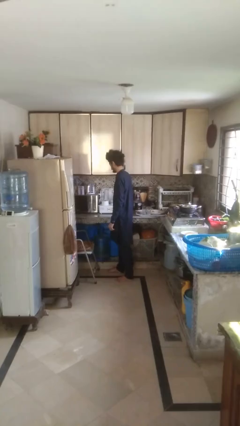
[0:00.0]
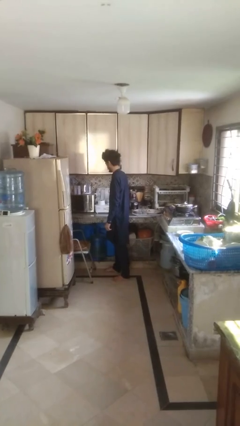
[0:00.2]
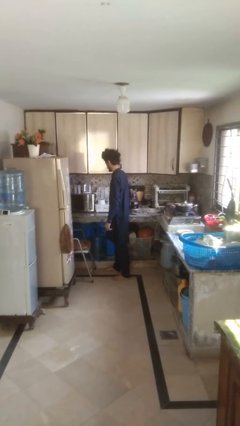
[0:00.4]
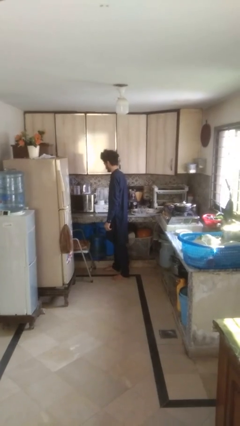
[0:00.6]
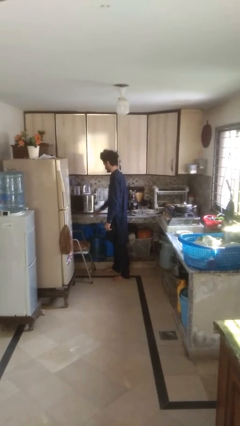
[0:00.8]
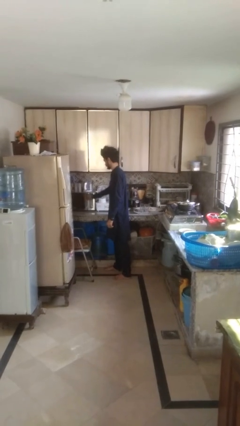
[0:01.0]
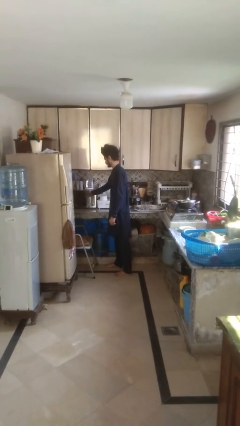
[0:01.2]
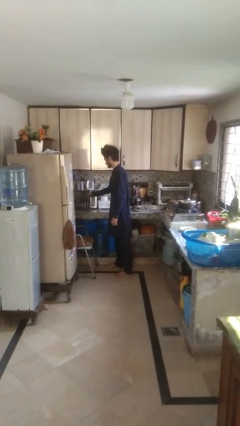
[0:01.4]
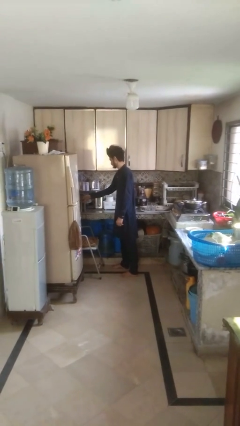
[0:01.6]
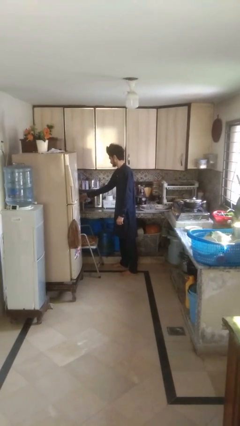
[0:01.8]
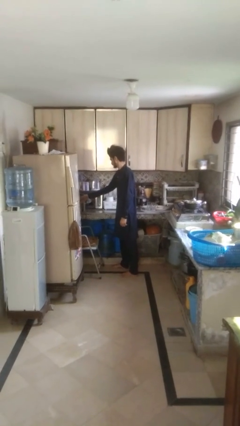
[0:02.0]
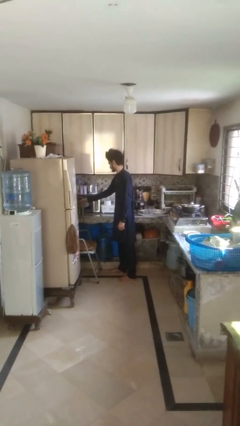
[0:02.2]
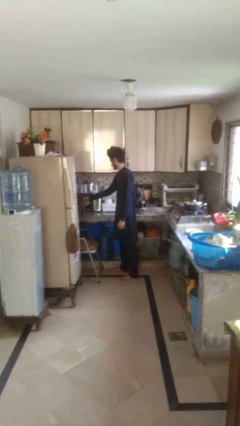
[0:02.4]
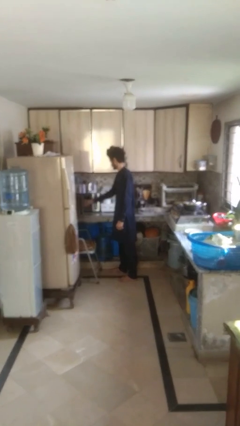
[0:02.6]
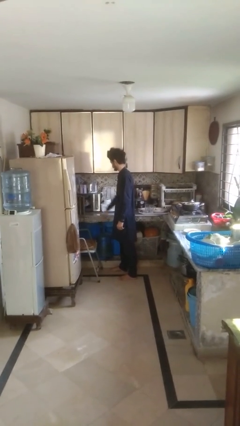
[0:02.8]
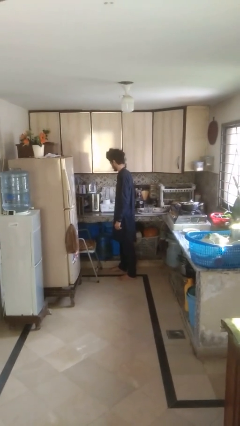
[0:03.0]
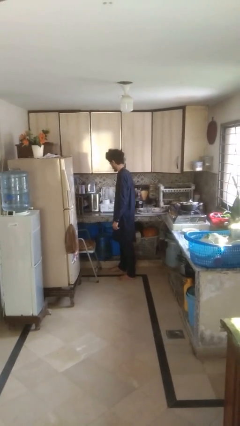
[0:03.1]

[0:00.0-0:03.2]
person opens oven door

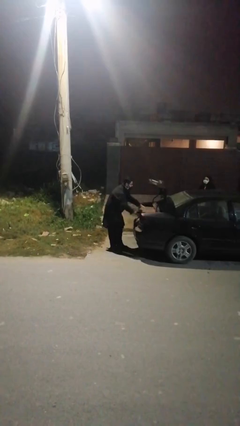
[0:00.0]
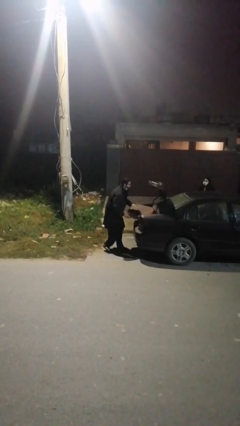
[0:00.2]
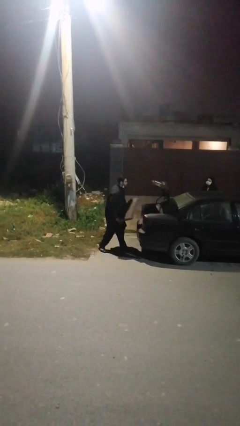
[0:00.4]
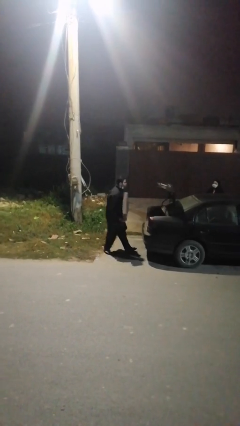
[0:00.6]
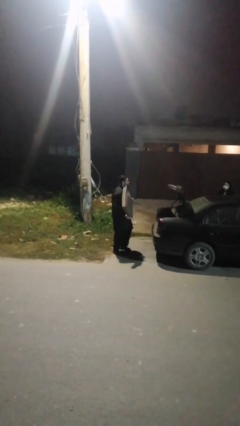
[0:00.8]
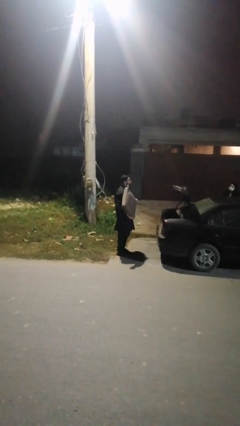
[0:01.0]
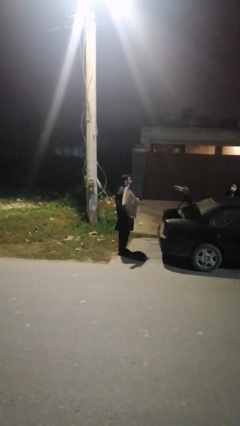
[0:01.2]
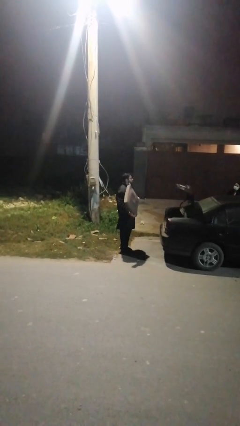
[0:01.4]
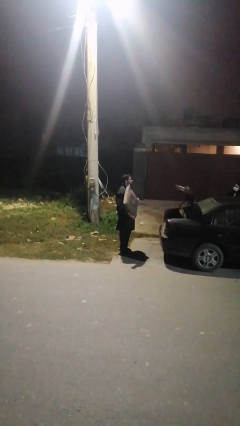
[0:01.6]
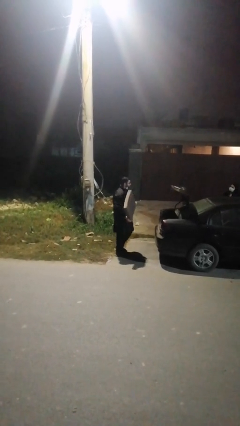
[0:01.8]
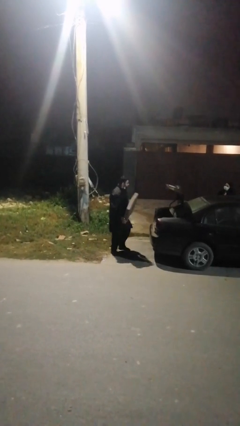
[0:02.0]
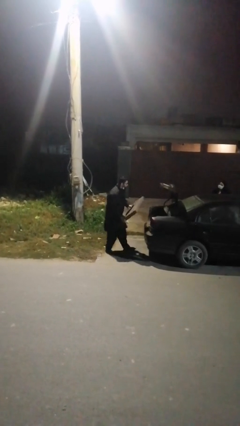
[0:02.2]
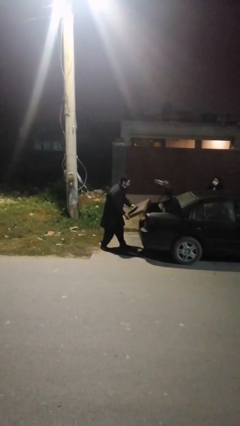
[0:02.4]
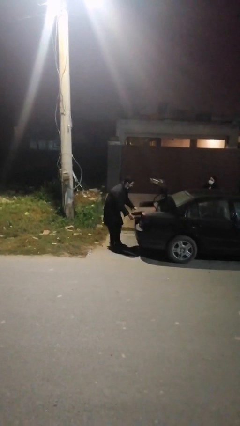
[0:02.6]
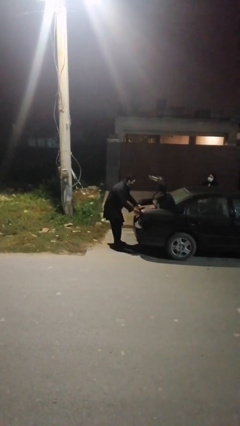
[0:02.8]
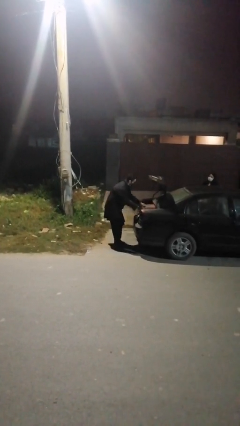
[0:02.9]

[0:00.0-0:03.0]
person unloads car

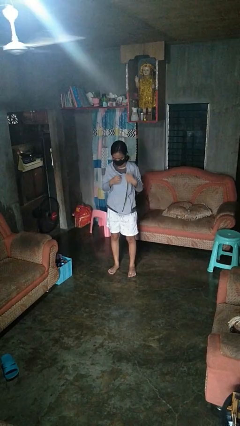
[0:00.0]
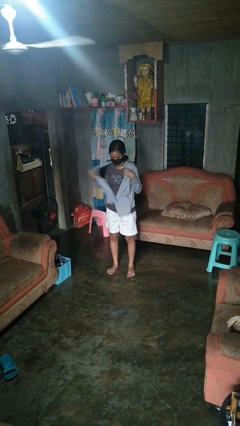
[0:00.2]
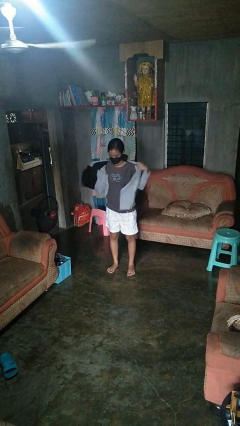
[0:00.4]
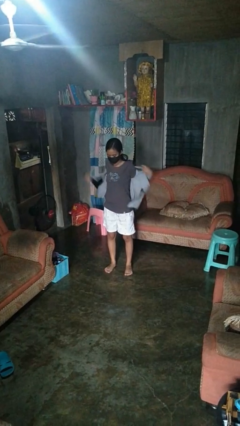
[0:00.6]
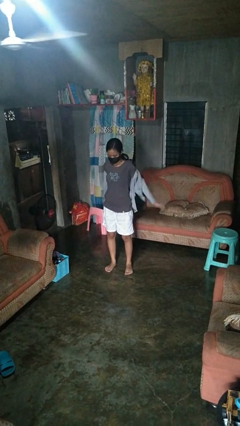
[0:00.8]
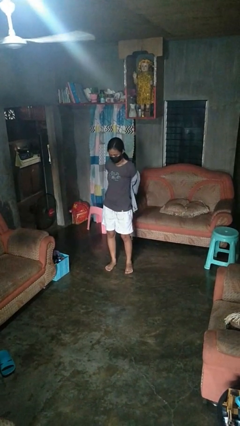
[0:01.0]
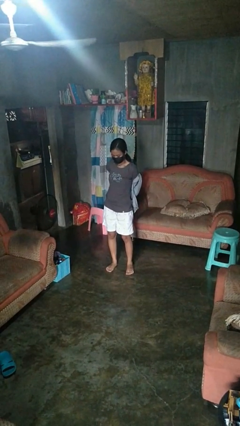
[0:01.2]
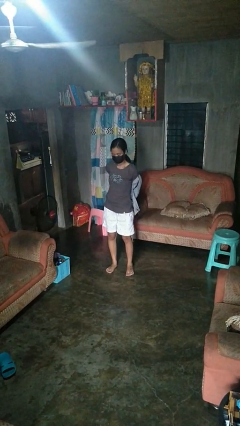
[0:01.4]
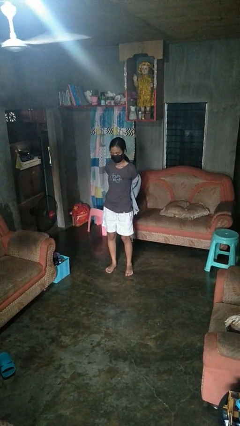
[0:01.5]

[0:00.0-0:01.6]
person takes off jacket

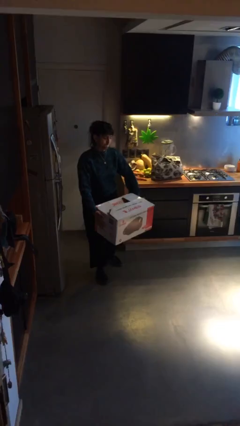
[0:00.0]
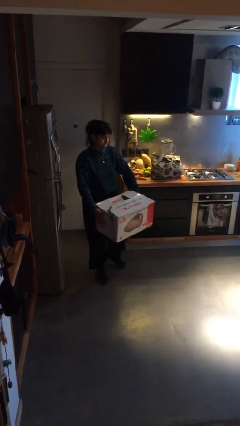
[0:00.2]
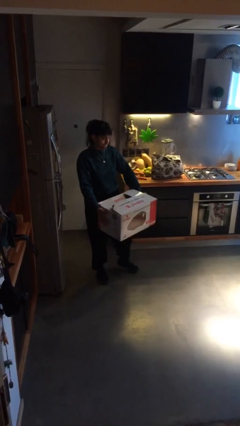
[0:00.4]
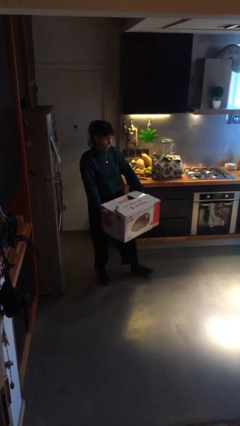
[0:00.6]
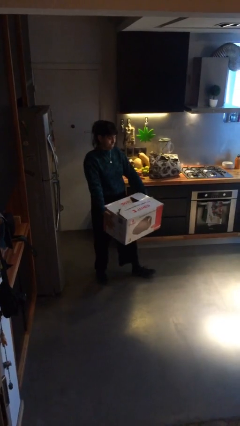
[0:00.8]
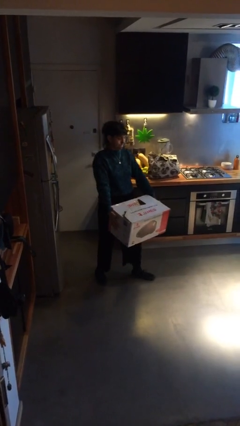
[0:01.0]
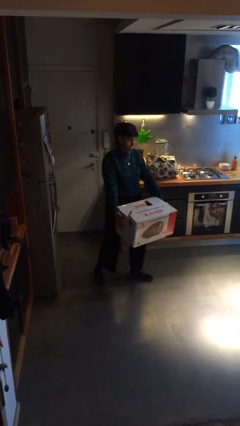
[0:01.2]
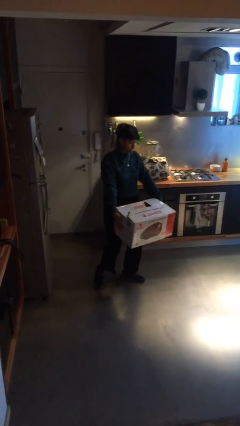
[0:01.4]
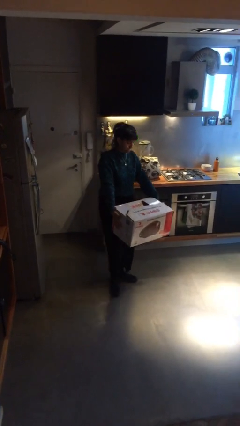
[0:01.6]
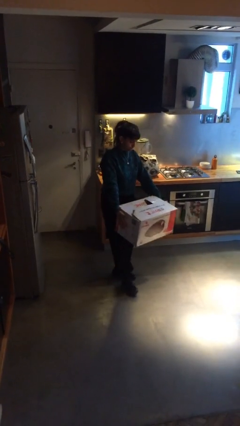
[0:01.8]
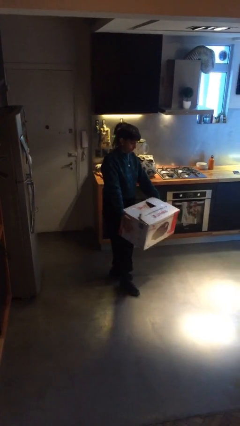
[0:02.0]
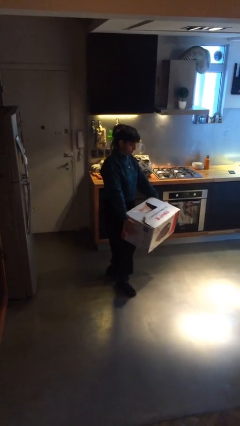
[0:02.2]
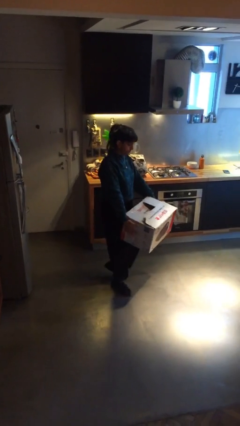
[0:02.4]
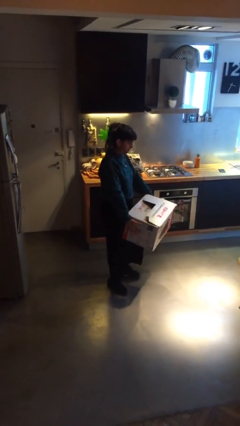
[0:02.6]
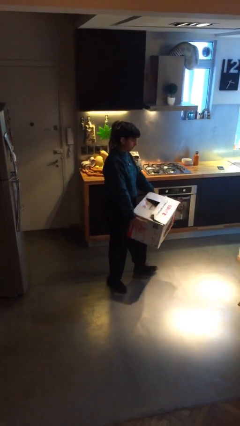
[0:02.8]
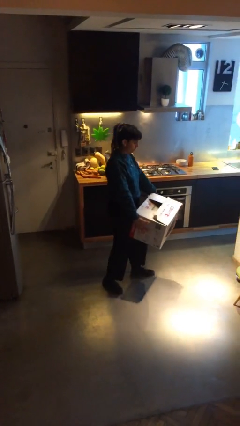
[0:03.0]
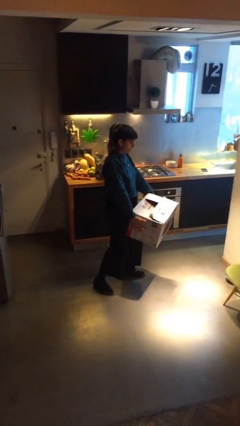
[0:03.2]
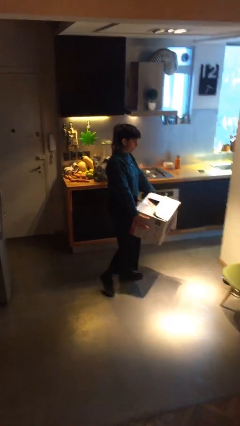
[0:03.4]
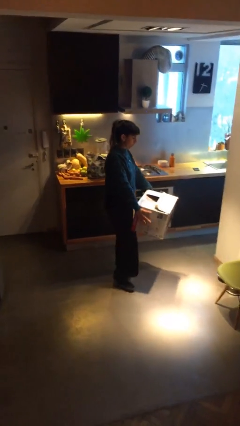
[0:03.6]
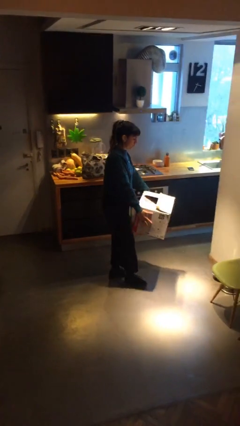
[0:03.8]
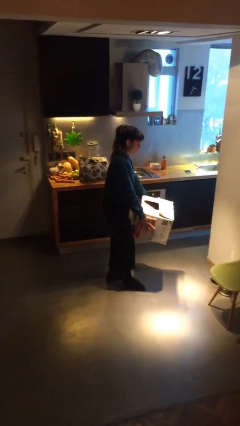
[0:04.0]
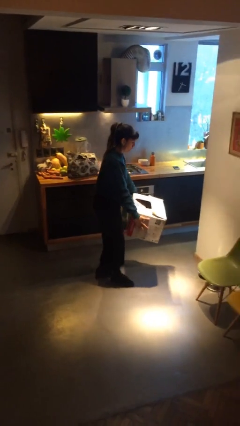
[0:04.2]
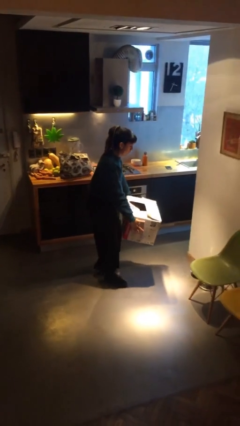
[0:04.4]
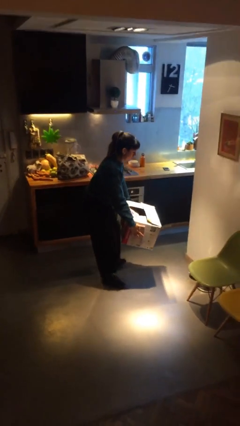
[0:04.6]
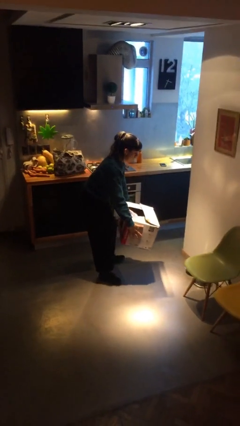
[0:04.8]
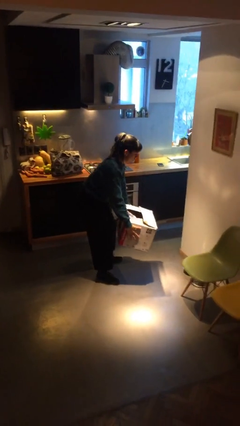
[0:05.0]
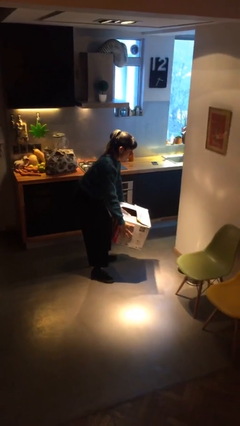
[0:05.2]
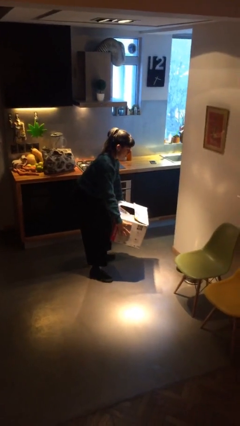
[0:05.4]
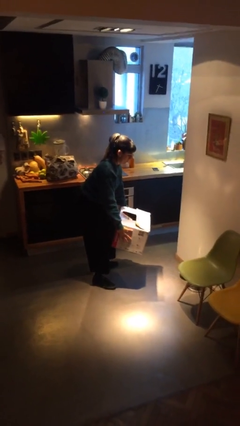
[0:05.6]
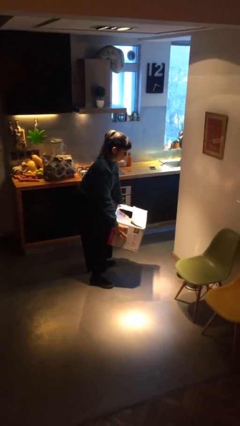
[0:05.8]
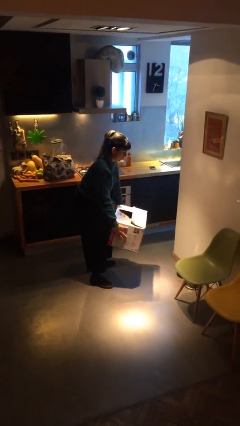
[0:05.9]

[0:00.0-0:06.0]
person carries heavy object

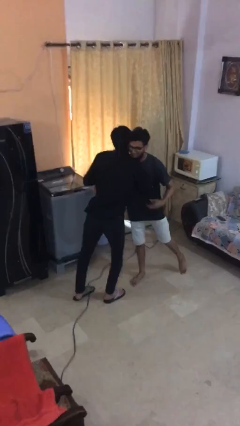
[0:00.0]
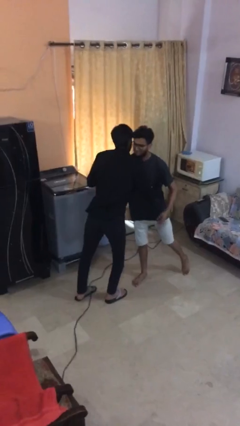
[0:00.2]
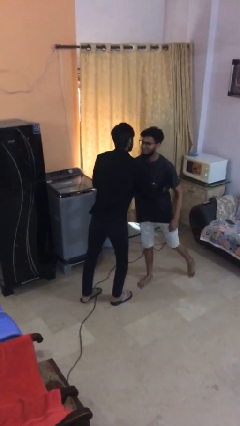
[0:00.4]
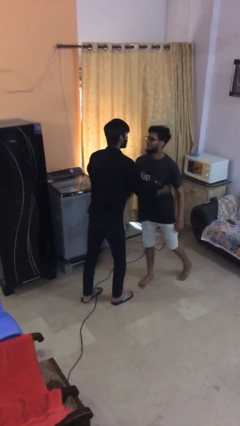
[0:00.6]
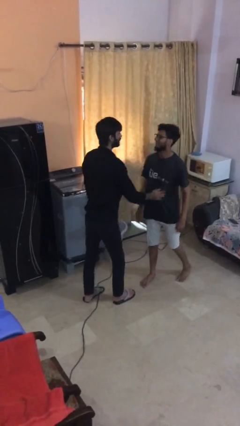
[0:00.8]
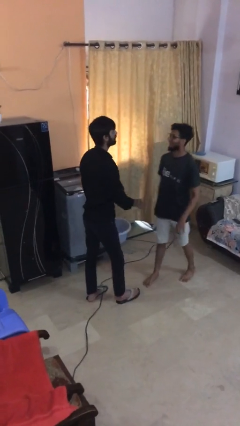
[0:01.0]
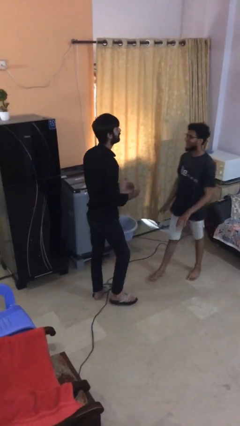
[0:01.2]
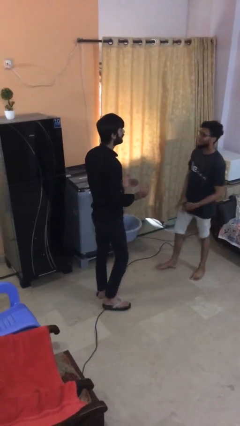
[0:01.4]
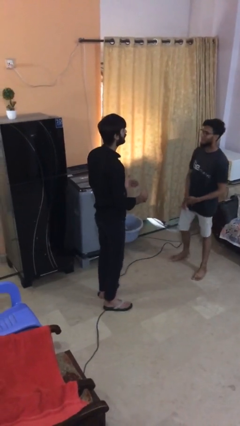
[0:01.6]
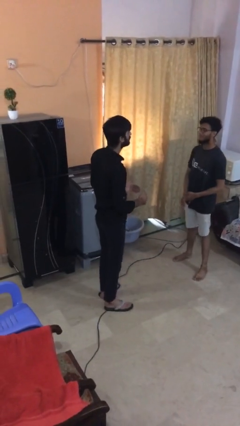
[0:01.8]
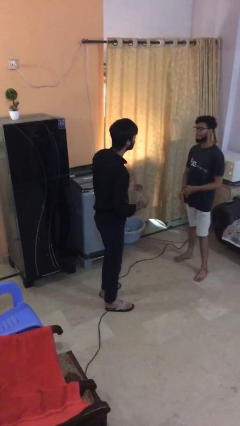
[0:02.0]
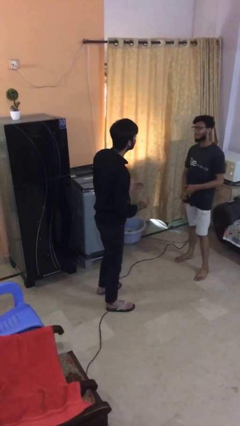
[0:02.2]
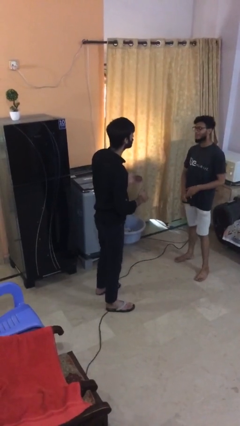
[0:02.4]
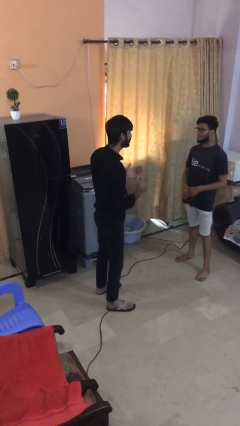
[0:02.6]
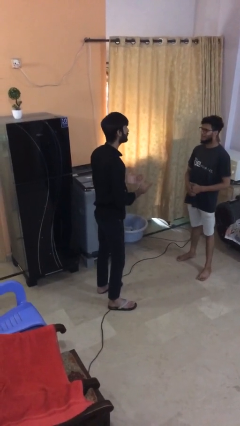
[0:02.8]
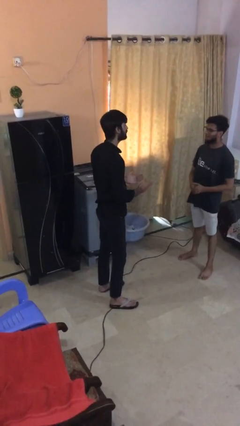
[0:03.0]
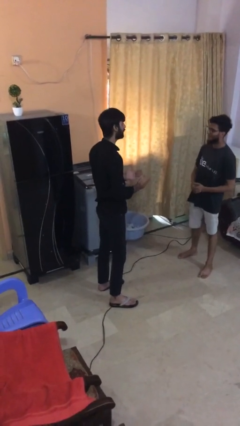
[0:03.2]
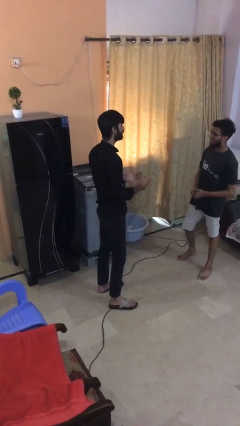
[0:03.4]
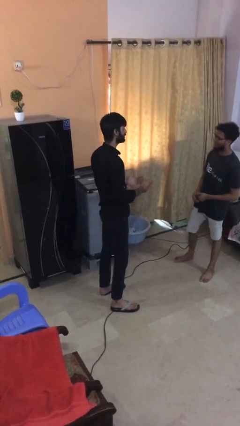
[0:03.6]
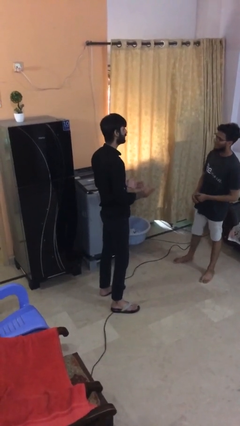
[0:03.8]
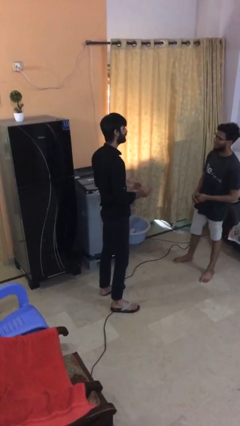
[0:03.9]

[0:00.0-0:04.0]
person talks to person
